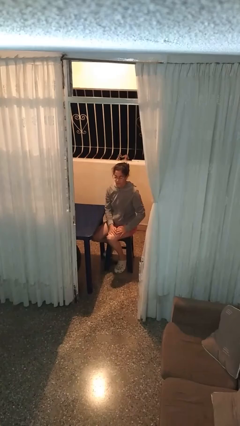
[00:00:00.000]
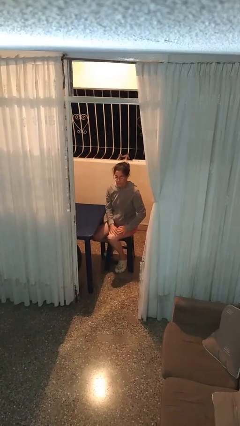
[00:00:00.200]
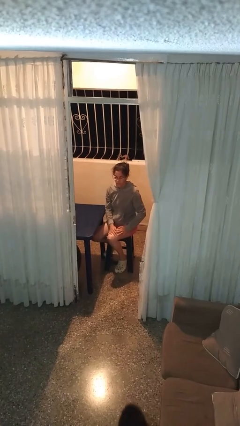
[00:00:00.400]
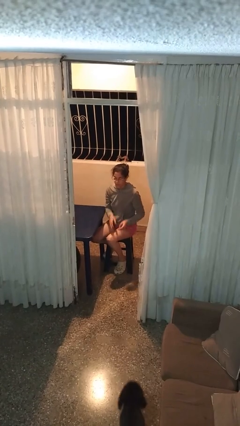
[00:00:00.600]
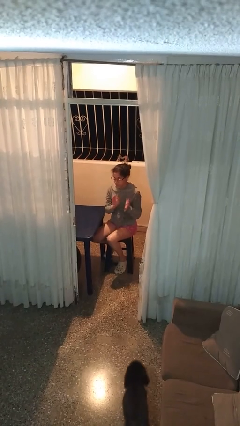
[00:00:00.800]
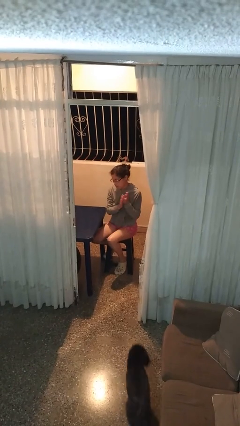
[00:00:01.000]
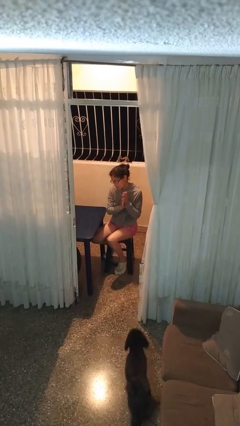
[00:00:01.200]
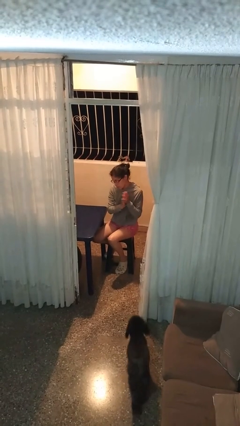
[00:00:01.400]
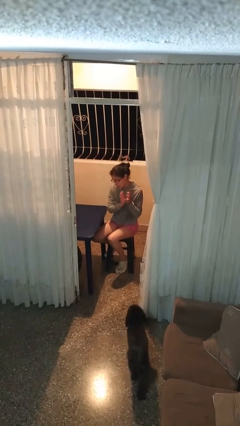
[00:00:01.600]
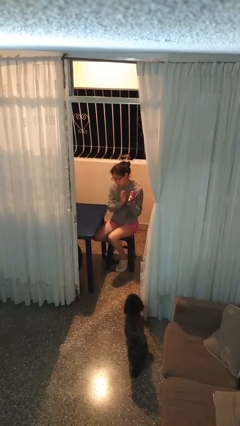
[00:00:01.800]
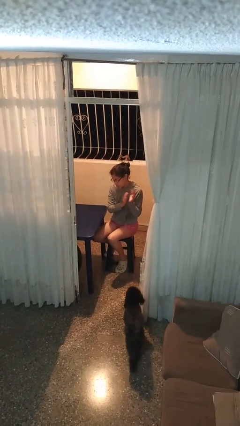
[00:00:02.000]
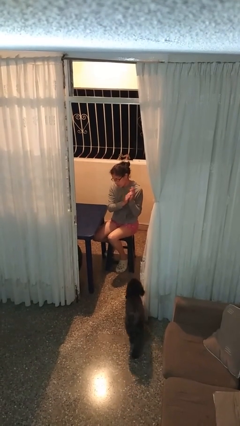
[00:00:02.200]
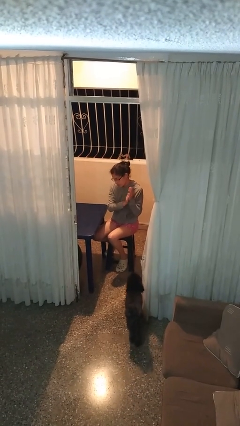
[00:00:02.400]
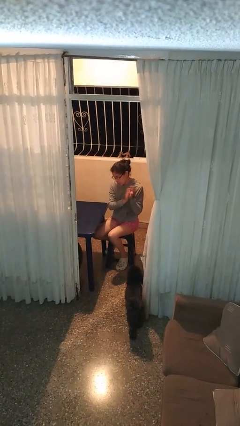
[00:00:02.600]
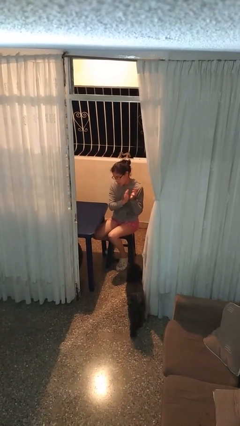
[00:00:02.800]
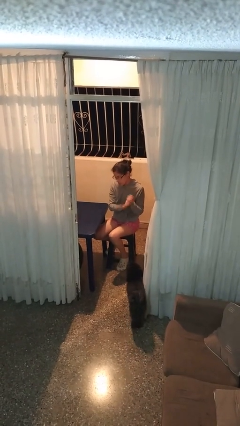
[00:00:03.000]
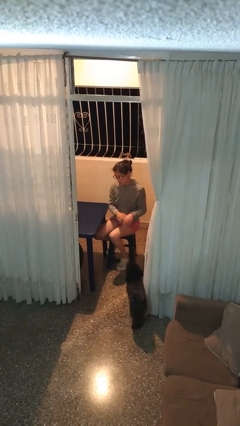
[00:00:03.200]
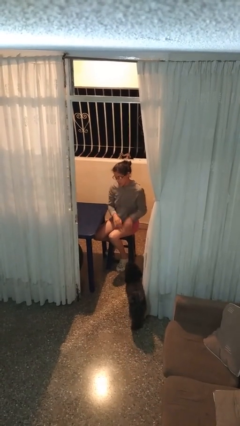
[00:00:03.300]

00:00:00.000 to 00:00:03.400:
person claps hands

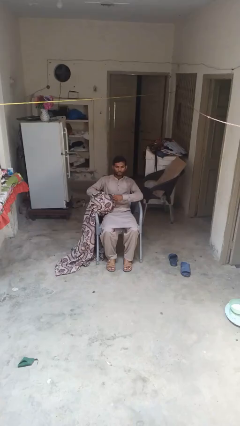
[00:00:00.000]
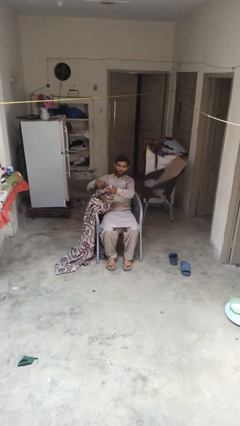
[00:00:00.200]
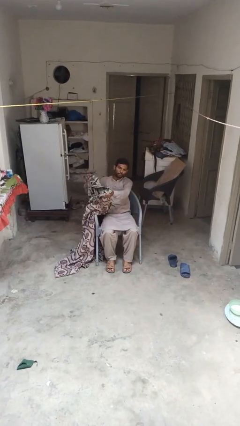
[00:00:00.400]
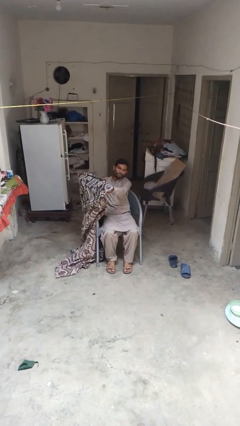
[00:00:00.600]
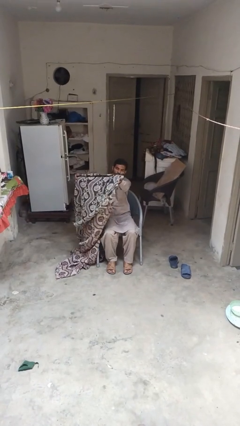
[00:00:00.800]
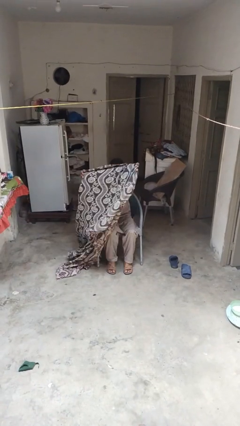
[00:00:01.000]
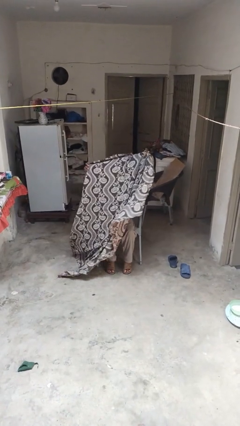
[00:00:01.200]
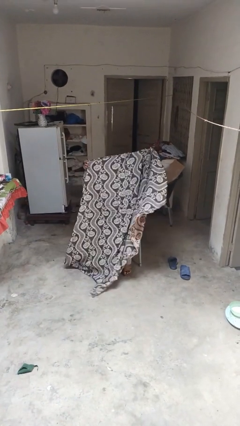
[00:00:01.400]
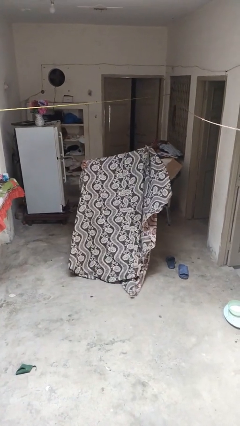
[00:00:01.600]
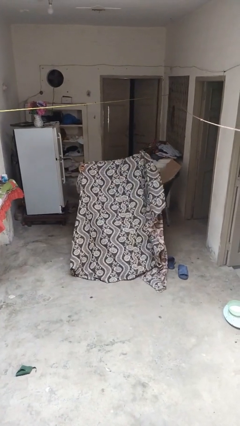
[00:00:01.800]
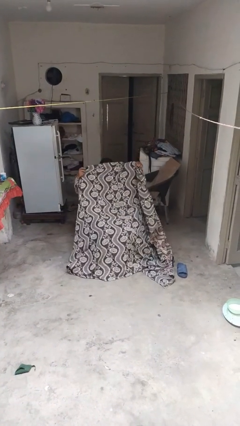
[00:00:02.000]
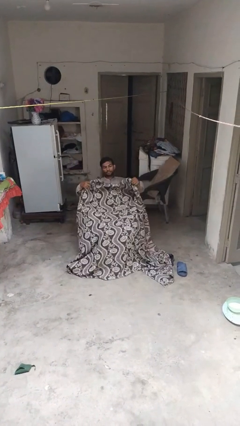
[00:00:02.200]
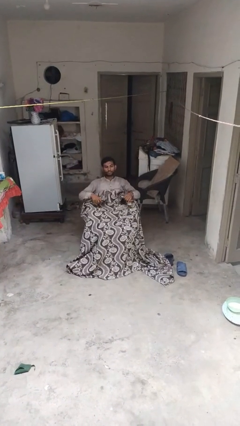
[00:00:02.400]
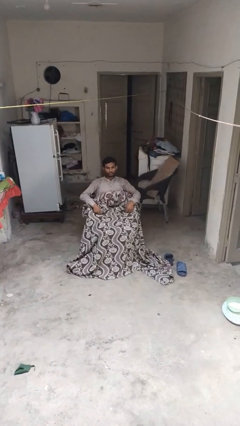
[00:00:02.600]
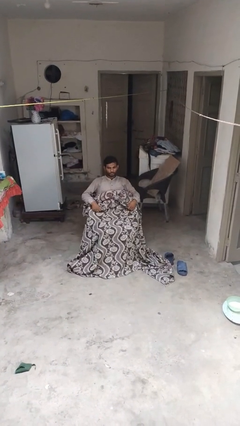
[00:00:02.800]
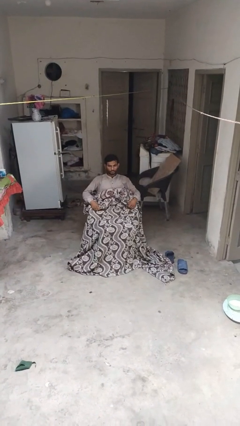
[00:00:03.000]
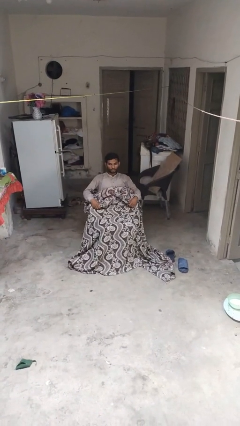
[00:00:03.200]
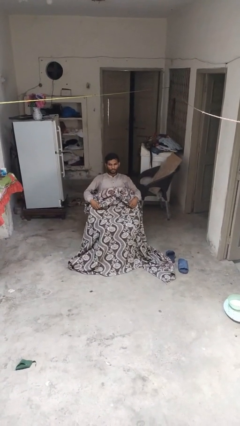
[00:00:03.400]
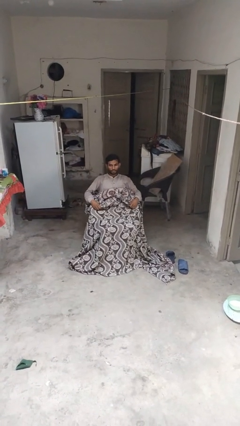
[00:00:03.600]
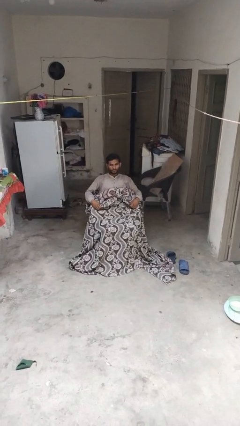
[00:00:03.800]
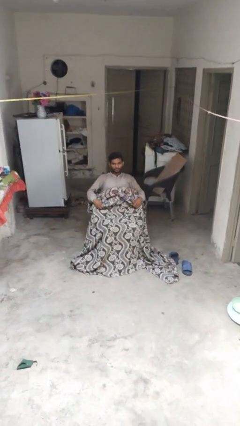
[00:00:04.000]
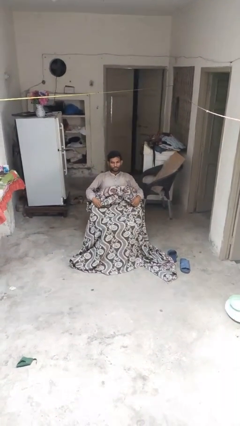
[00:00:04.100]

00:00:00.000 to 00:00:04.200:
person covers with blanket

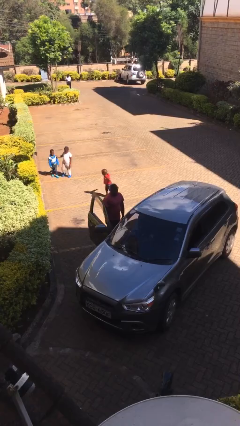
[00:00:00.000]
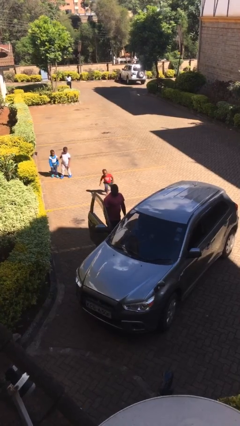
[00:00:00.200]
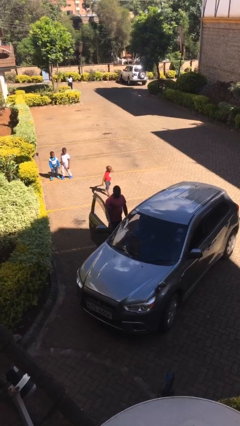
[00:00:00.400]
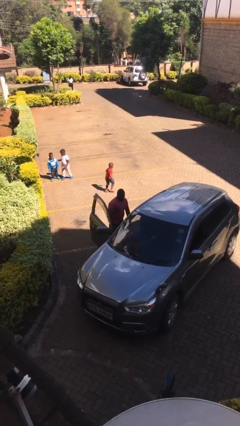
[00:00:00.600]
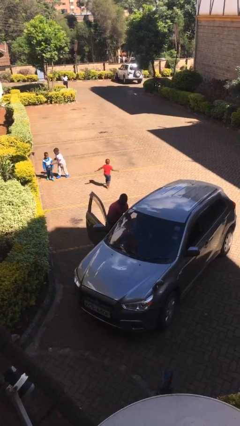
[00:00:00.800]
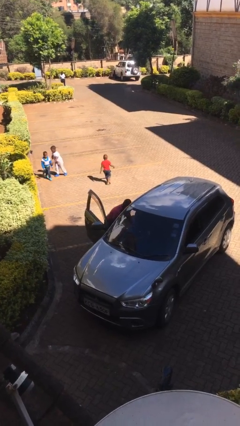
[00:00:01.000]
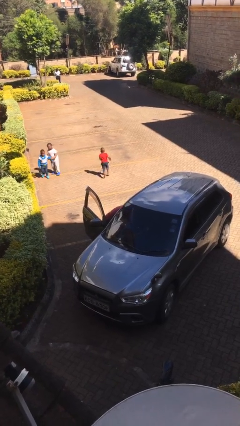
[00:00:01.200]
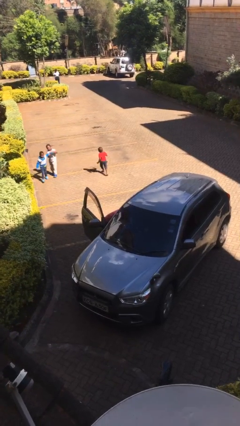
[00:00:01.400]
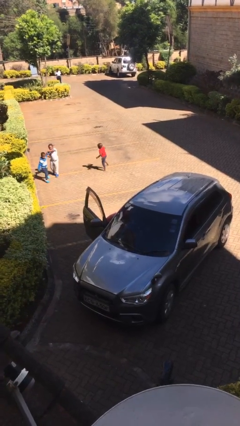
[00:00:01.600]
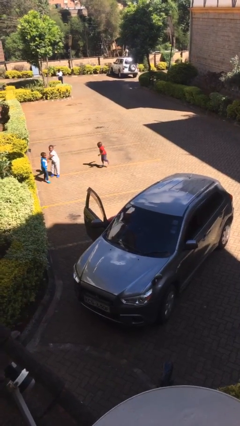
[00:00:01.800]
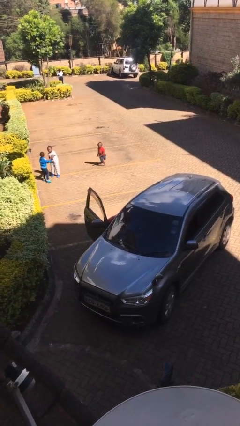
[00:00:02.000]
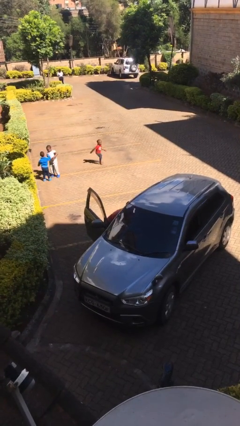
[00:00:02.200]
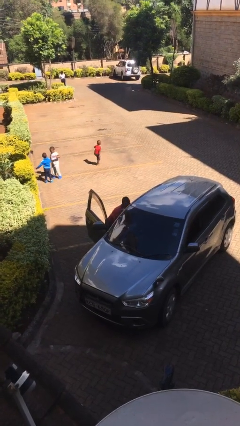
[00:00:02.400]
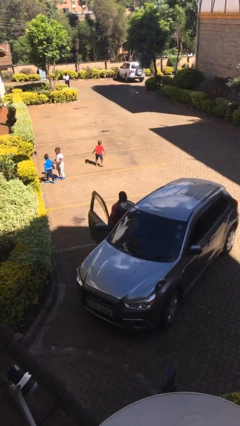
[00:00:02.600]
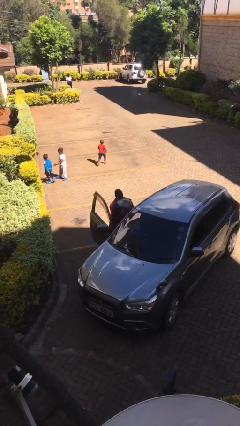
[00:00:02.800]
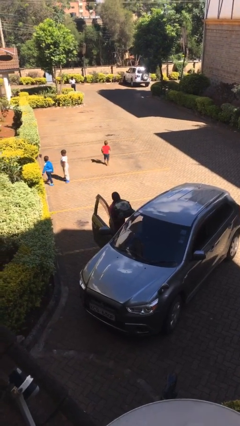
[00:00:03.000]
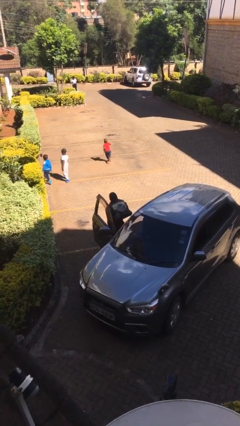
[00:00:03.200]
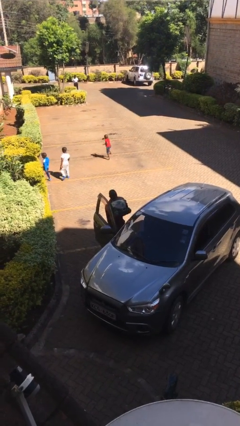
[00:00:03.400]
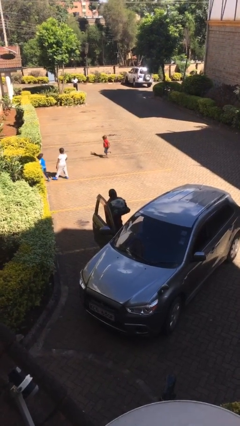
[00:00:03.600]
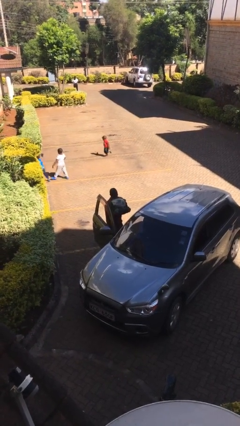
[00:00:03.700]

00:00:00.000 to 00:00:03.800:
person unloads car

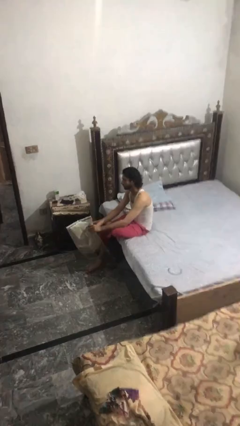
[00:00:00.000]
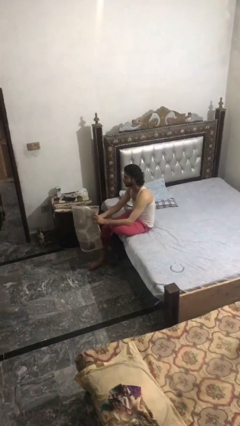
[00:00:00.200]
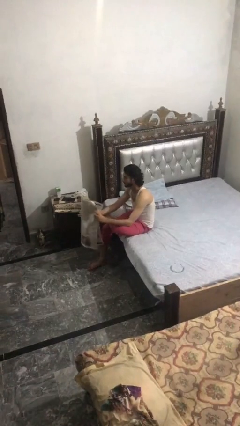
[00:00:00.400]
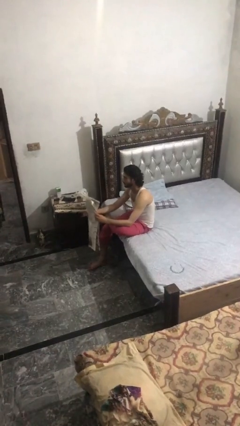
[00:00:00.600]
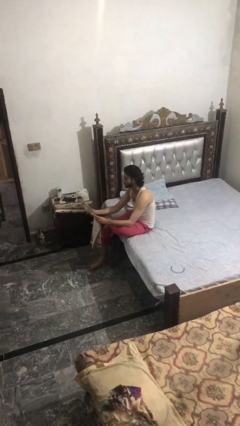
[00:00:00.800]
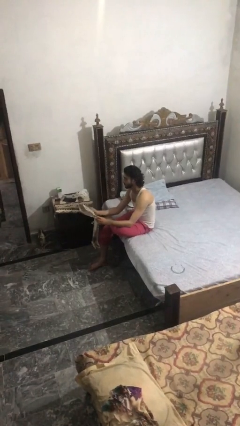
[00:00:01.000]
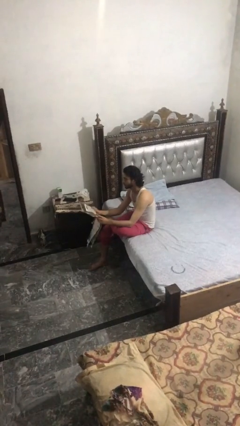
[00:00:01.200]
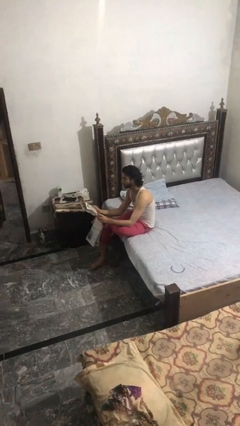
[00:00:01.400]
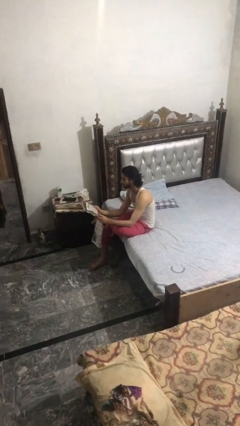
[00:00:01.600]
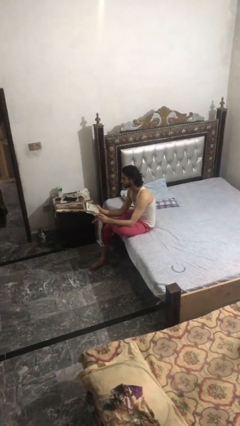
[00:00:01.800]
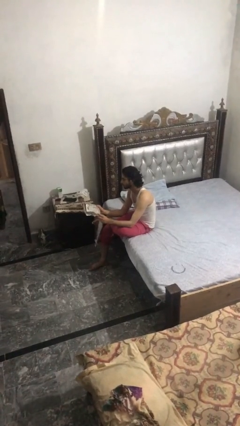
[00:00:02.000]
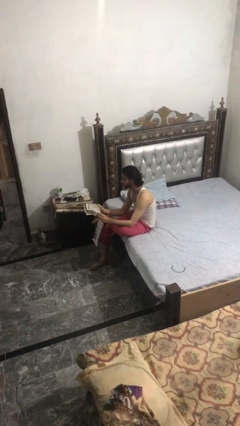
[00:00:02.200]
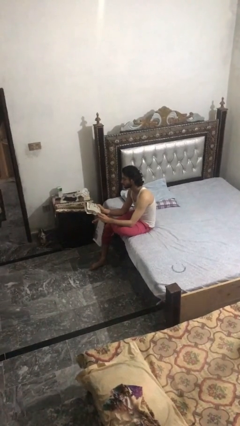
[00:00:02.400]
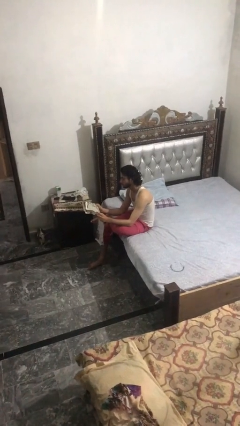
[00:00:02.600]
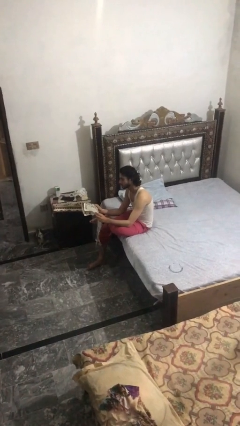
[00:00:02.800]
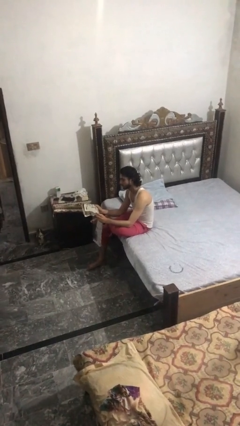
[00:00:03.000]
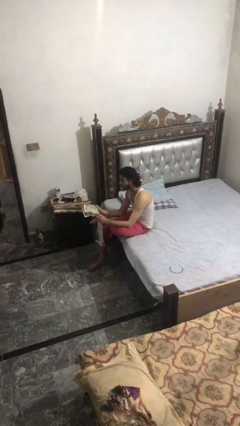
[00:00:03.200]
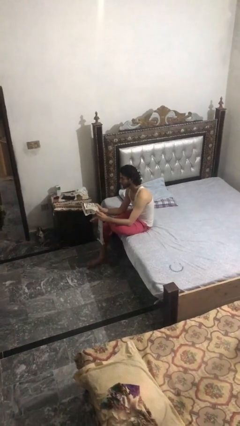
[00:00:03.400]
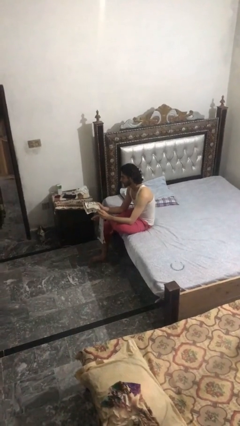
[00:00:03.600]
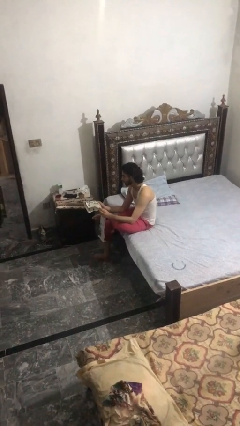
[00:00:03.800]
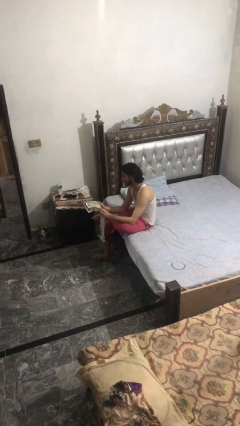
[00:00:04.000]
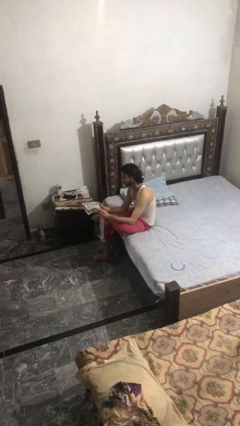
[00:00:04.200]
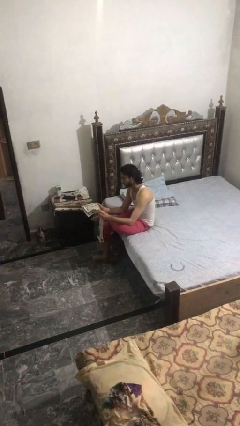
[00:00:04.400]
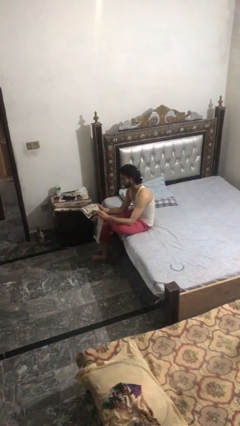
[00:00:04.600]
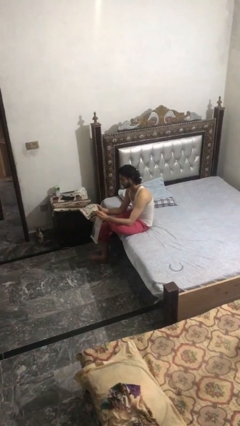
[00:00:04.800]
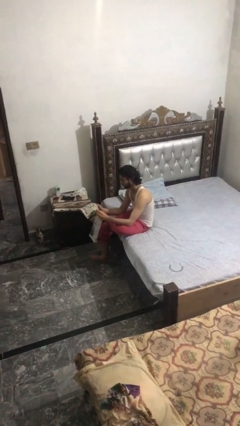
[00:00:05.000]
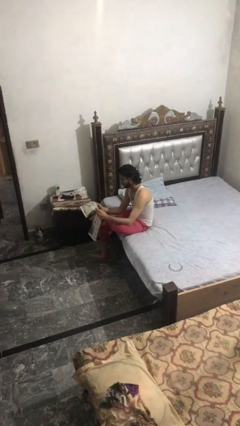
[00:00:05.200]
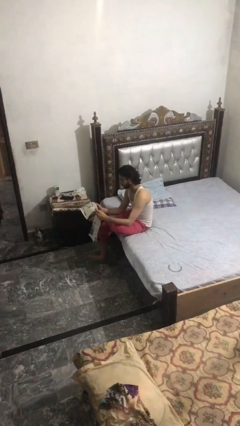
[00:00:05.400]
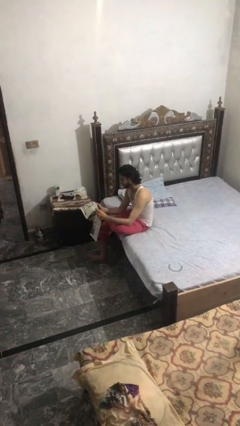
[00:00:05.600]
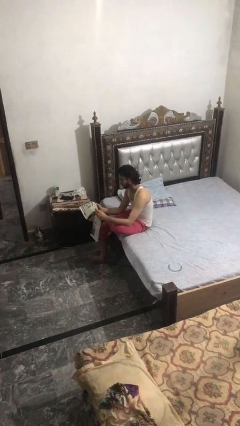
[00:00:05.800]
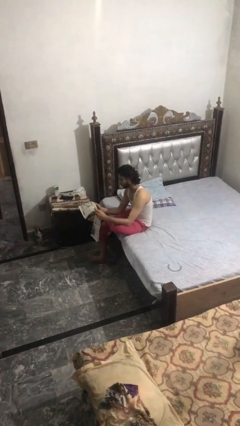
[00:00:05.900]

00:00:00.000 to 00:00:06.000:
person reads newspaper
